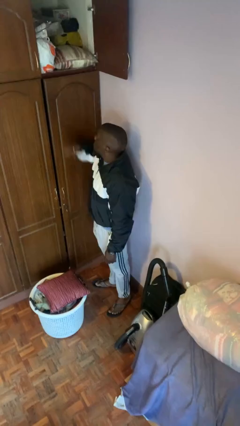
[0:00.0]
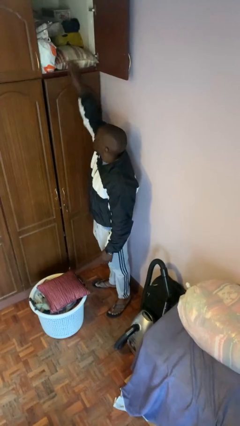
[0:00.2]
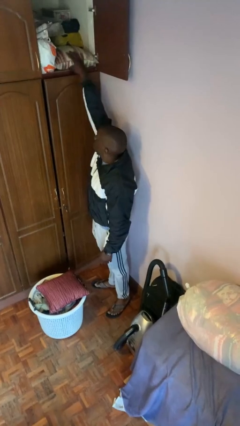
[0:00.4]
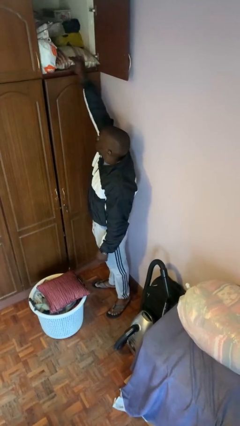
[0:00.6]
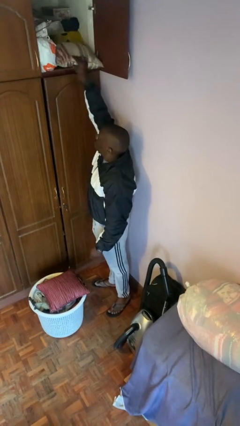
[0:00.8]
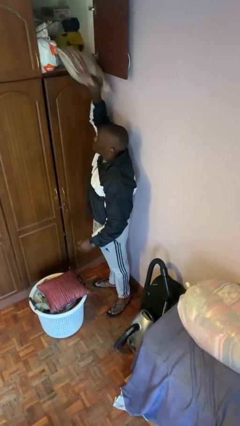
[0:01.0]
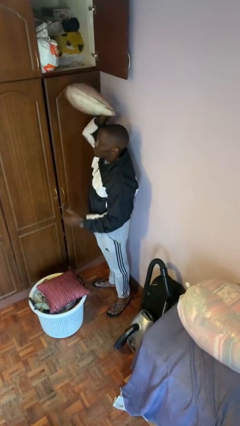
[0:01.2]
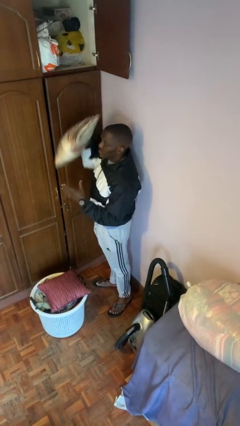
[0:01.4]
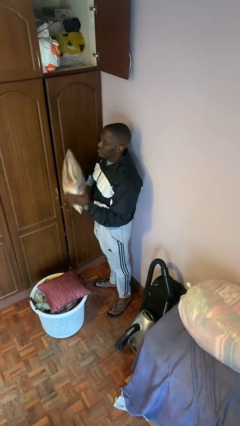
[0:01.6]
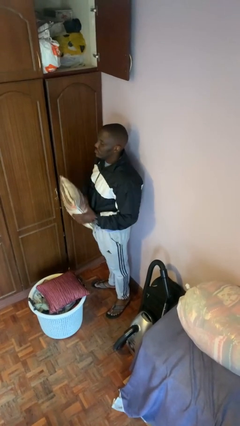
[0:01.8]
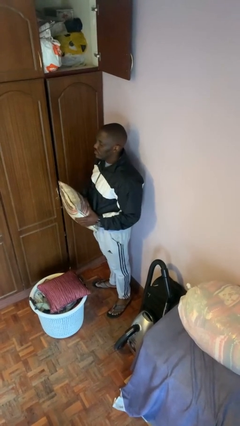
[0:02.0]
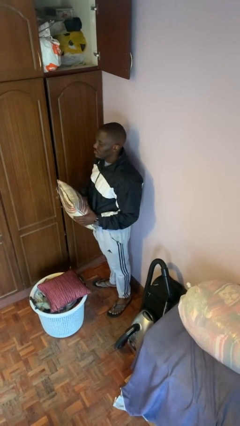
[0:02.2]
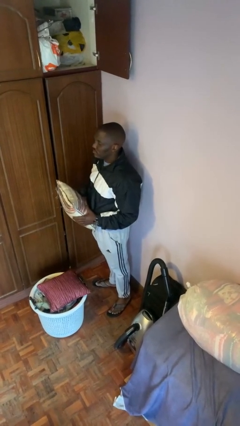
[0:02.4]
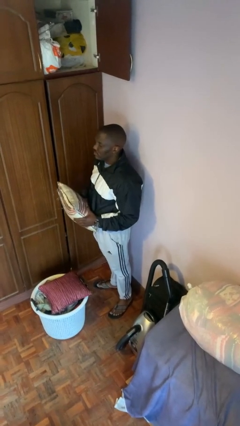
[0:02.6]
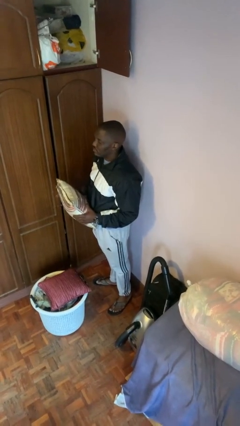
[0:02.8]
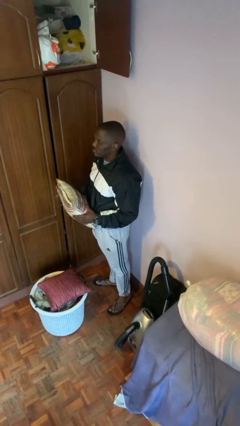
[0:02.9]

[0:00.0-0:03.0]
person picks up object from shelf

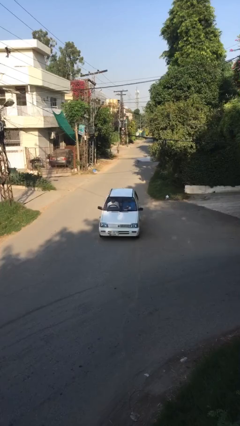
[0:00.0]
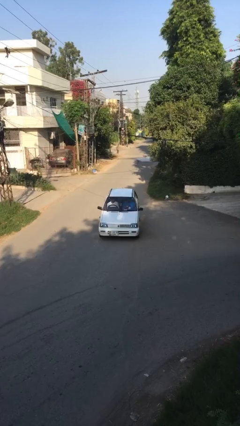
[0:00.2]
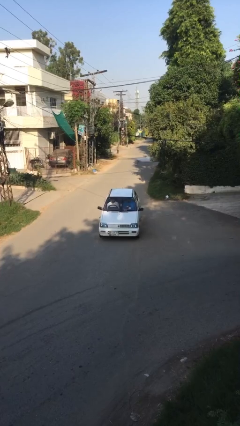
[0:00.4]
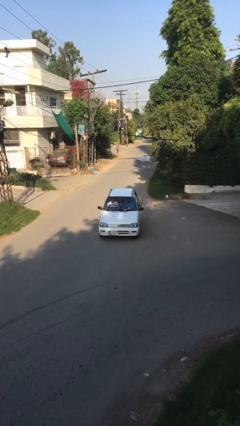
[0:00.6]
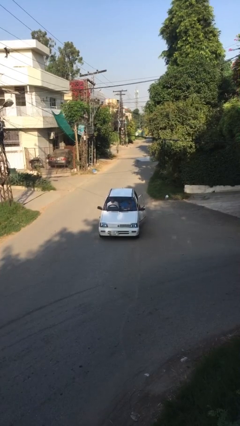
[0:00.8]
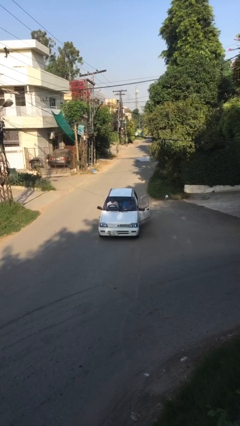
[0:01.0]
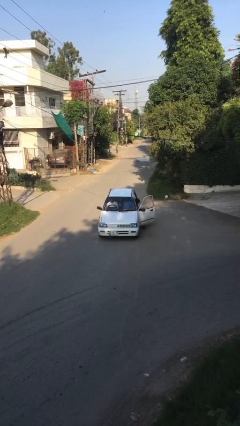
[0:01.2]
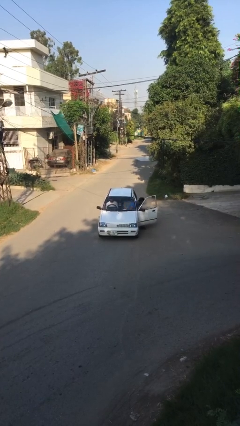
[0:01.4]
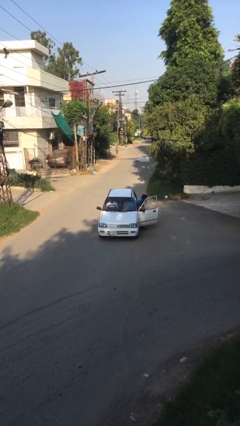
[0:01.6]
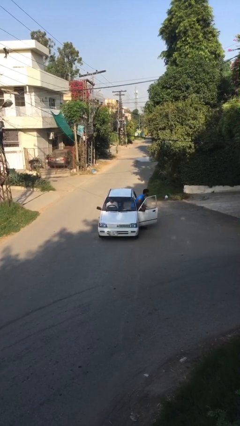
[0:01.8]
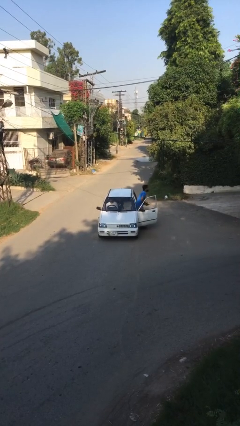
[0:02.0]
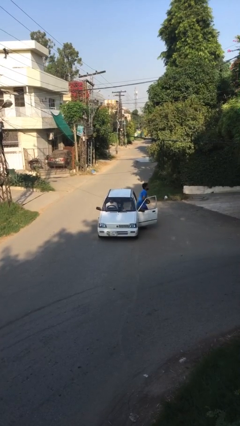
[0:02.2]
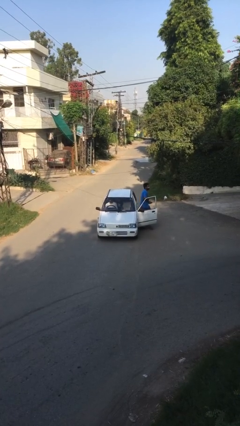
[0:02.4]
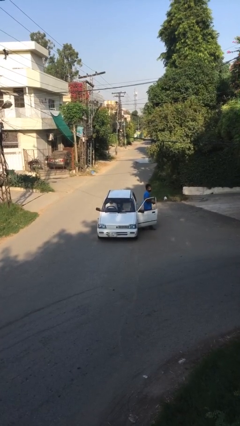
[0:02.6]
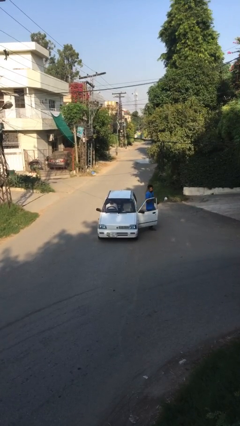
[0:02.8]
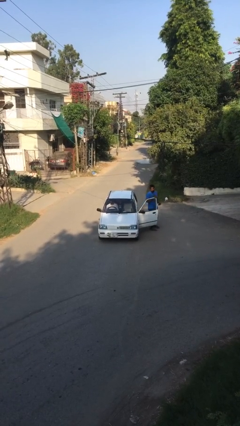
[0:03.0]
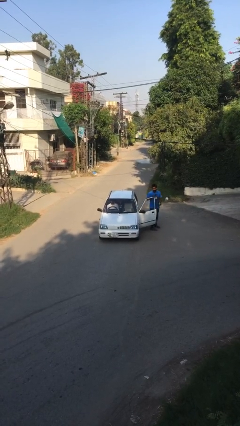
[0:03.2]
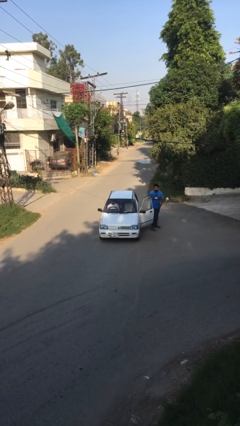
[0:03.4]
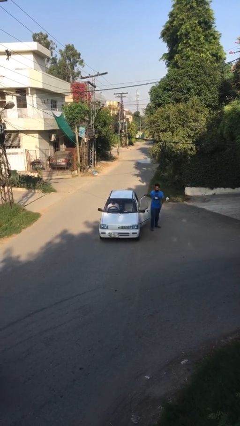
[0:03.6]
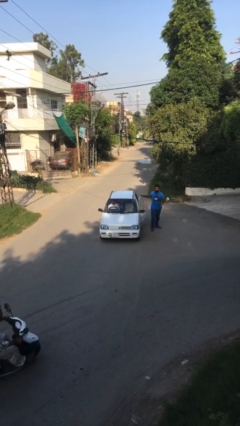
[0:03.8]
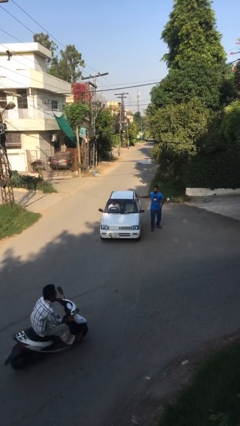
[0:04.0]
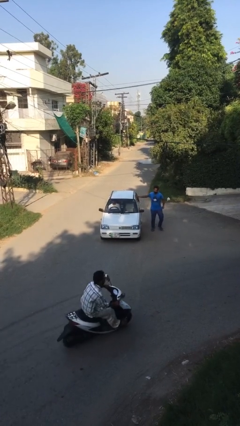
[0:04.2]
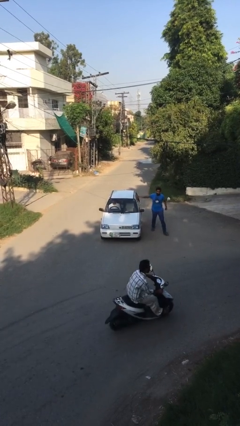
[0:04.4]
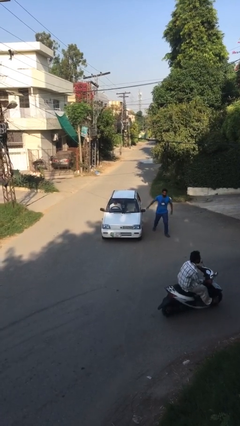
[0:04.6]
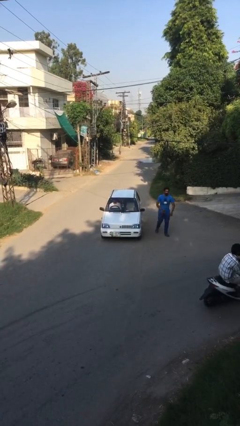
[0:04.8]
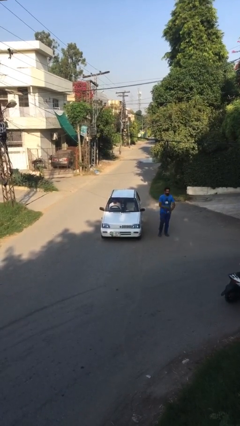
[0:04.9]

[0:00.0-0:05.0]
car drops off person

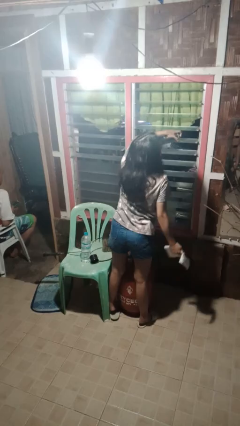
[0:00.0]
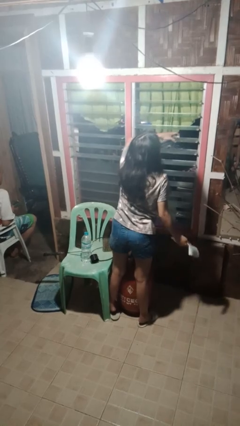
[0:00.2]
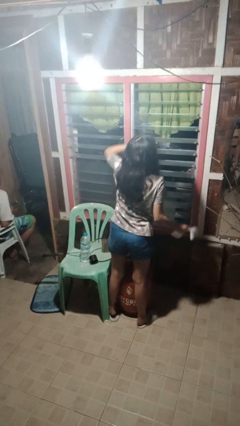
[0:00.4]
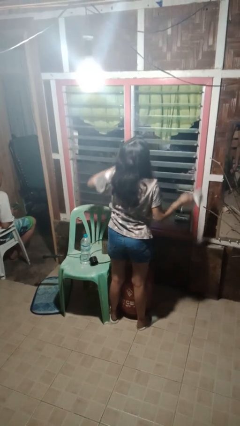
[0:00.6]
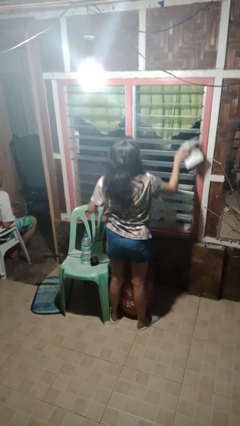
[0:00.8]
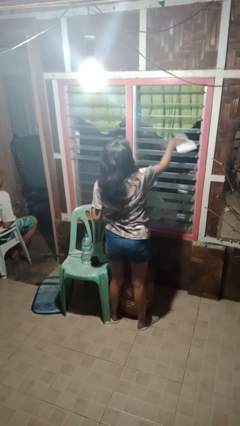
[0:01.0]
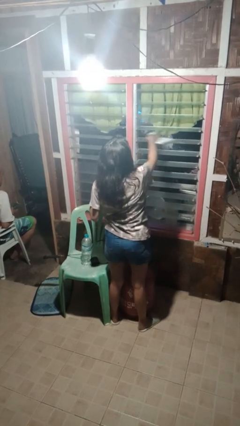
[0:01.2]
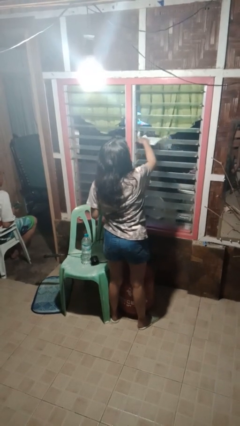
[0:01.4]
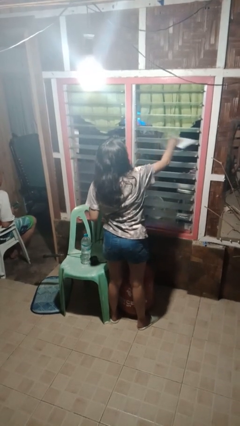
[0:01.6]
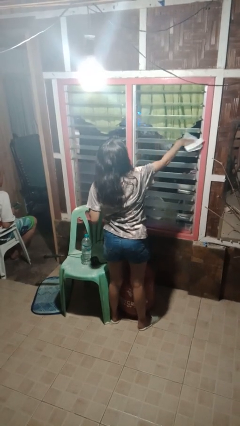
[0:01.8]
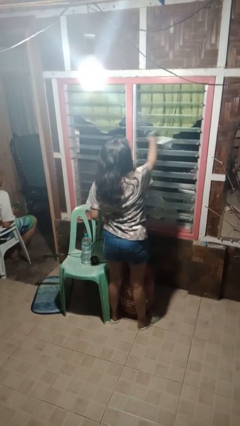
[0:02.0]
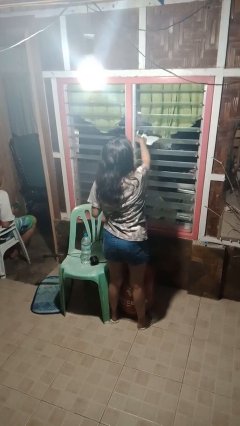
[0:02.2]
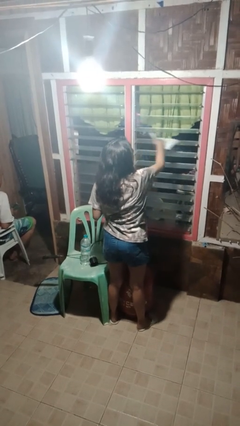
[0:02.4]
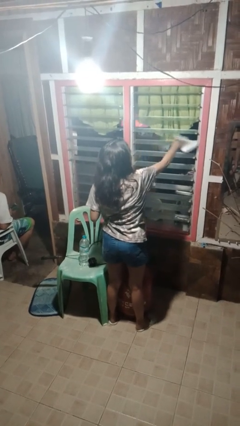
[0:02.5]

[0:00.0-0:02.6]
person washes window

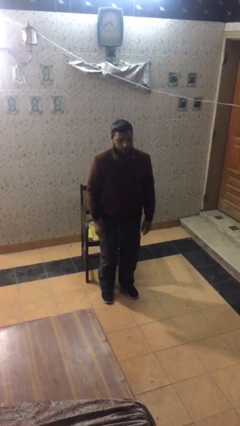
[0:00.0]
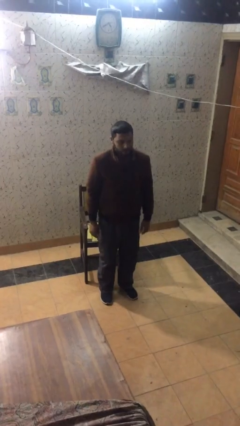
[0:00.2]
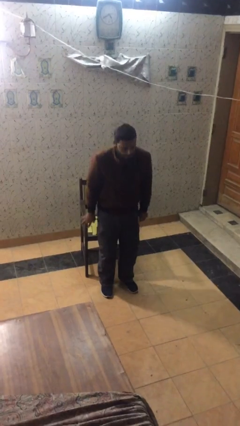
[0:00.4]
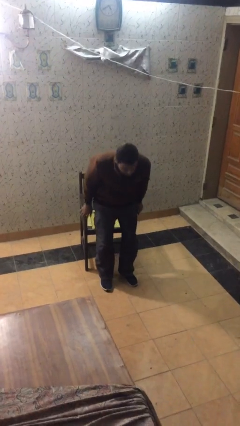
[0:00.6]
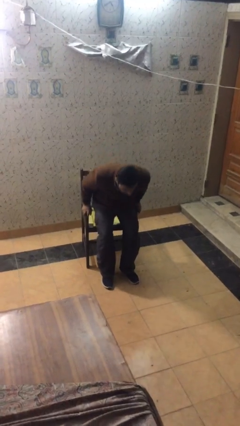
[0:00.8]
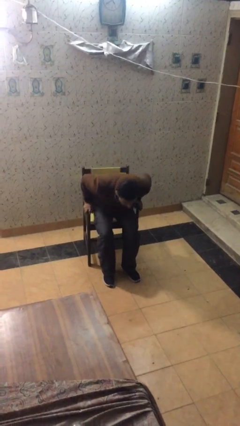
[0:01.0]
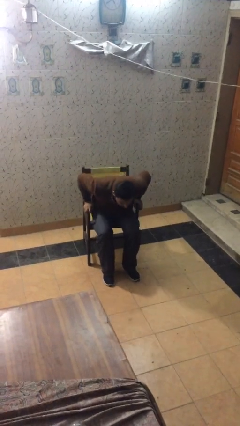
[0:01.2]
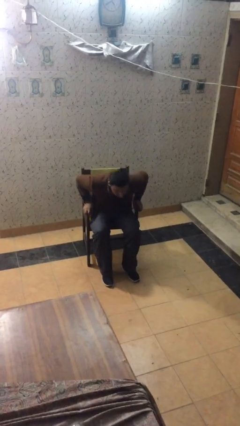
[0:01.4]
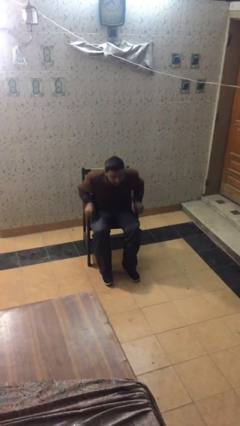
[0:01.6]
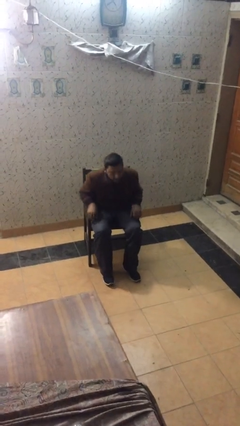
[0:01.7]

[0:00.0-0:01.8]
person sits down

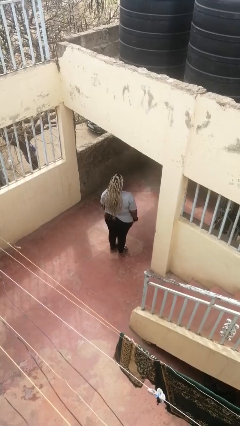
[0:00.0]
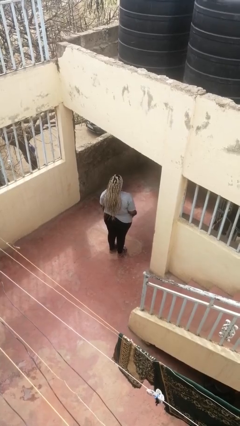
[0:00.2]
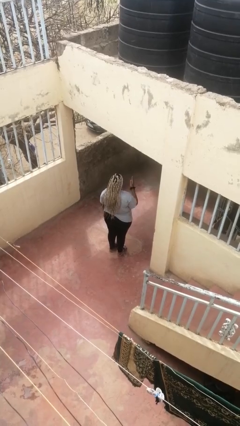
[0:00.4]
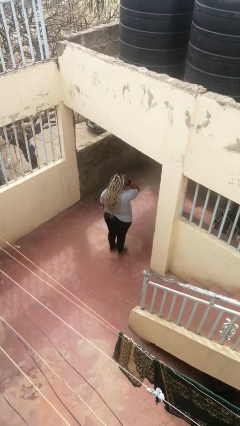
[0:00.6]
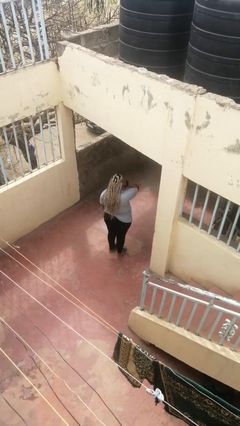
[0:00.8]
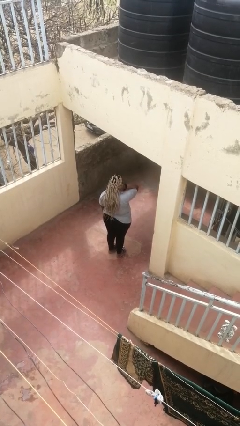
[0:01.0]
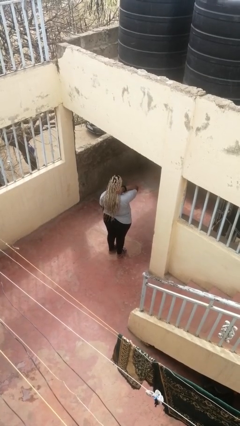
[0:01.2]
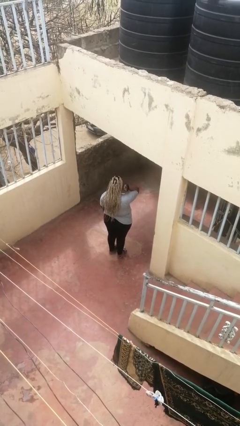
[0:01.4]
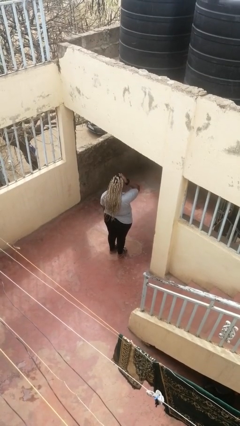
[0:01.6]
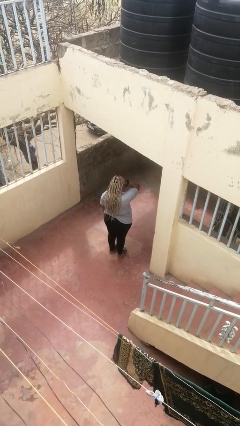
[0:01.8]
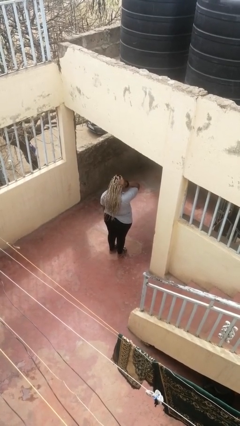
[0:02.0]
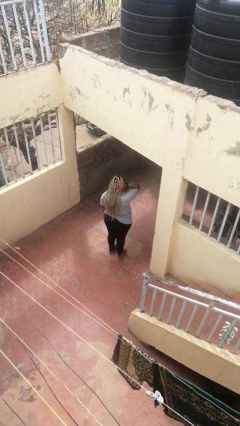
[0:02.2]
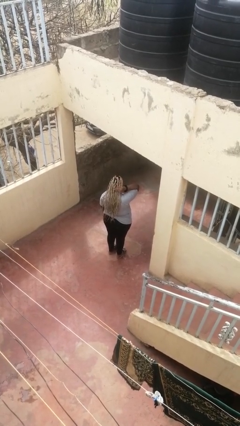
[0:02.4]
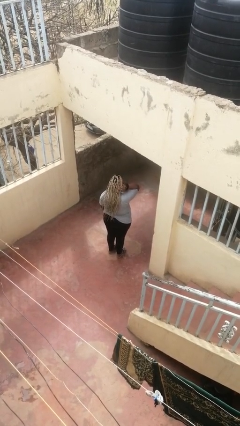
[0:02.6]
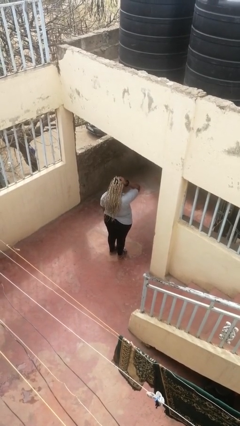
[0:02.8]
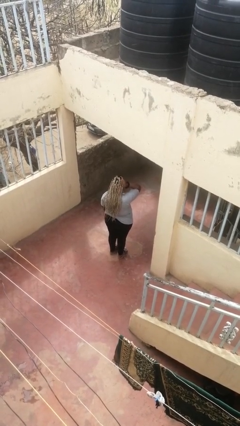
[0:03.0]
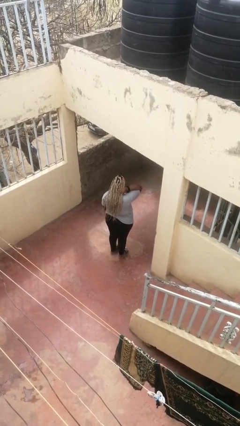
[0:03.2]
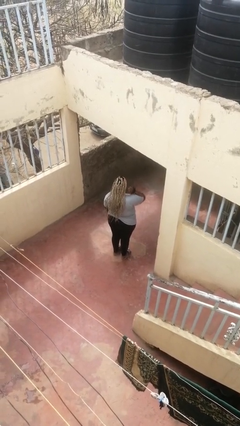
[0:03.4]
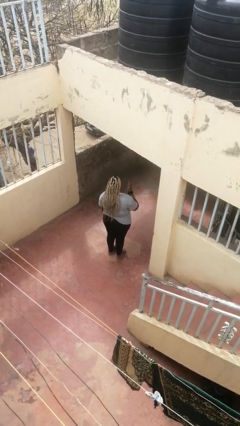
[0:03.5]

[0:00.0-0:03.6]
person strokes hair

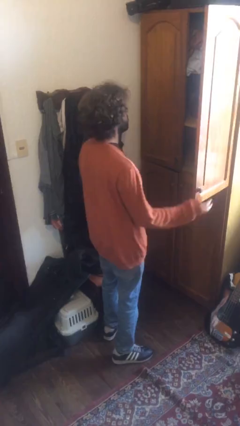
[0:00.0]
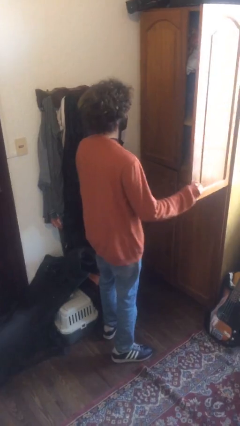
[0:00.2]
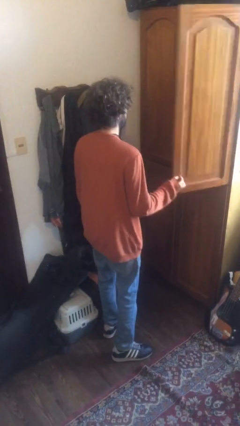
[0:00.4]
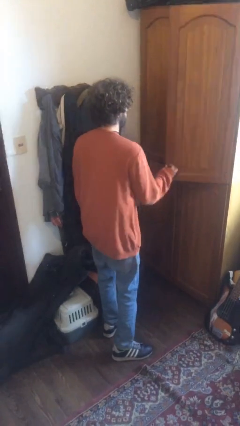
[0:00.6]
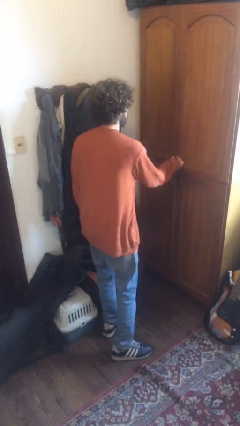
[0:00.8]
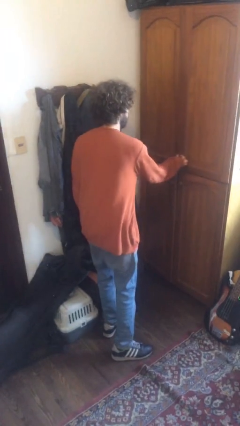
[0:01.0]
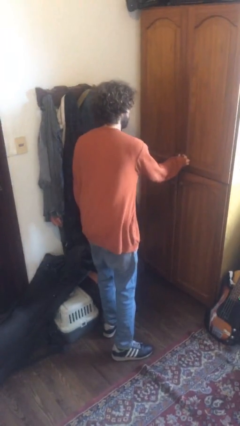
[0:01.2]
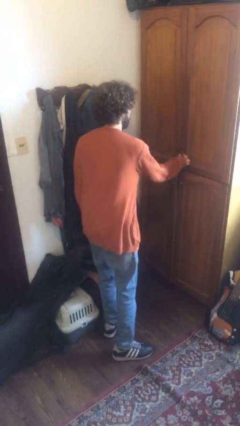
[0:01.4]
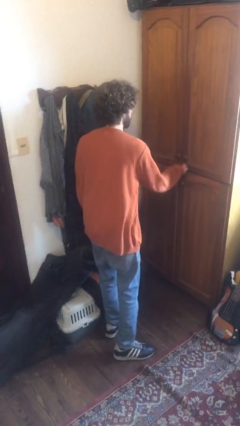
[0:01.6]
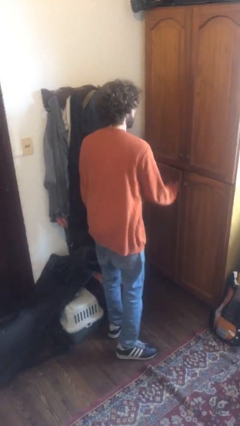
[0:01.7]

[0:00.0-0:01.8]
person closes dresser drawer
